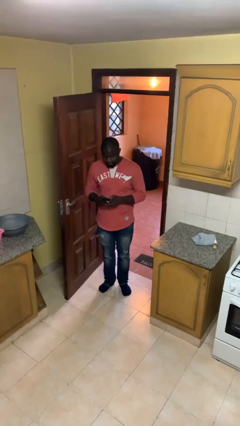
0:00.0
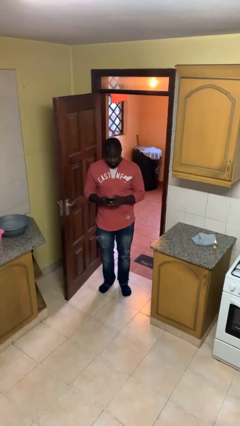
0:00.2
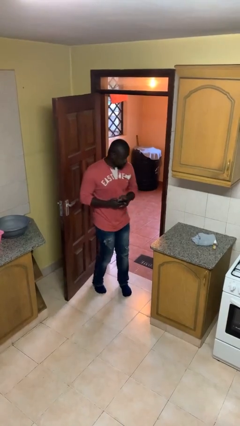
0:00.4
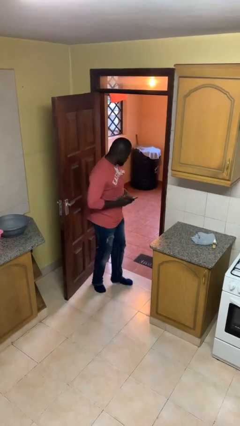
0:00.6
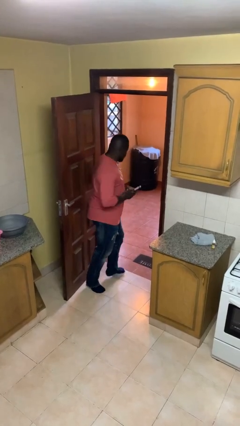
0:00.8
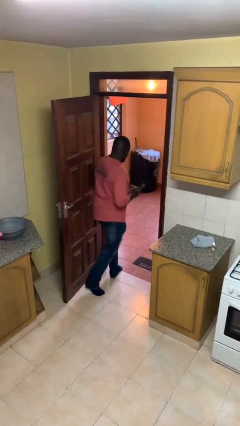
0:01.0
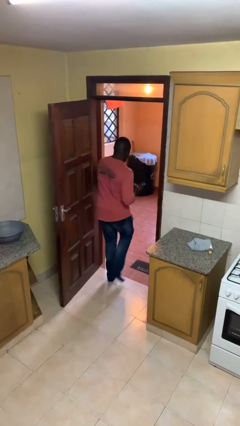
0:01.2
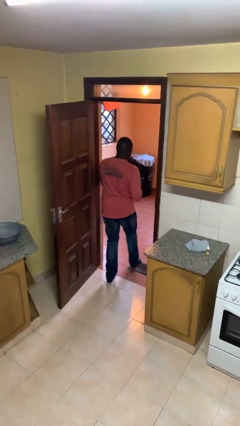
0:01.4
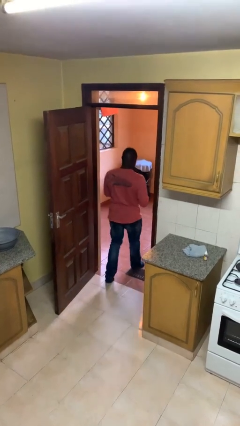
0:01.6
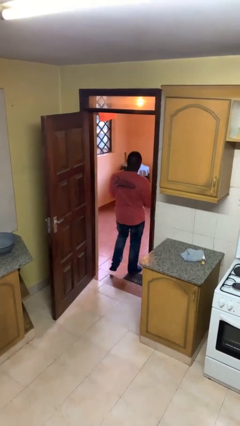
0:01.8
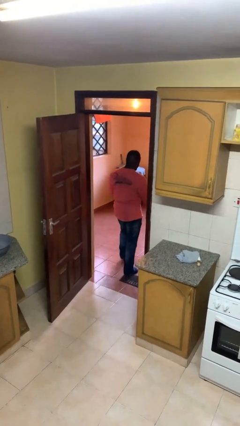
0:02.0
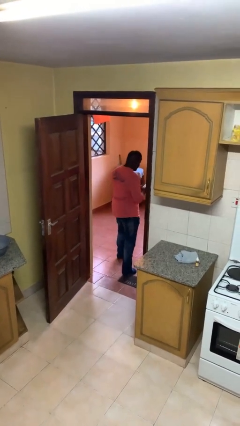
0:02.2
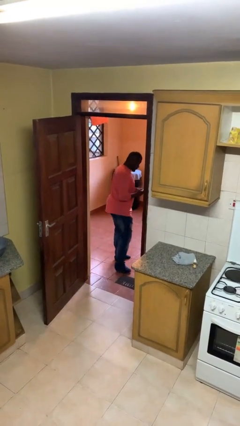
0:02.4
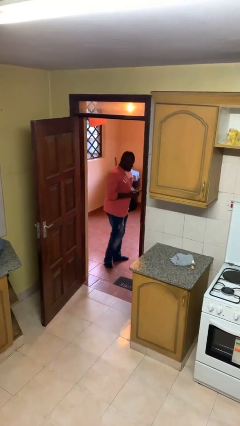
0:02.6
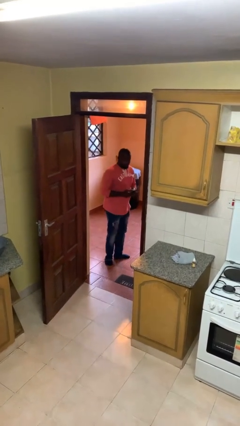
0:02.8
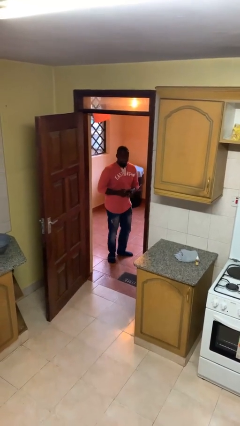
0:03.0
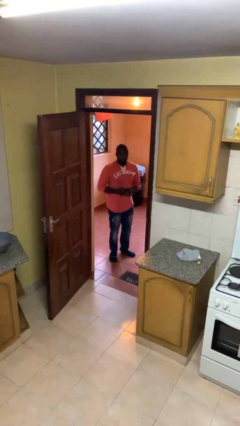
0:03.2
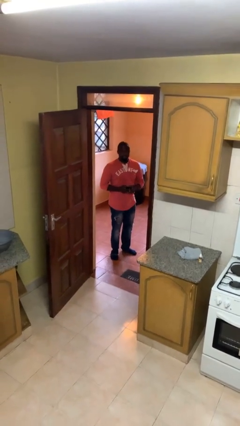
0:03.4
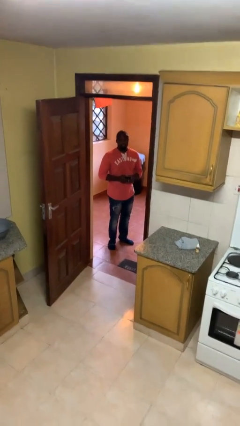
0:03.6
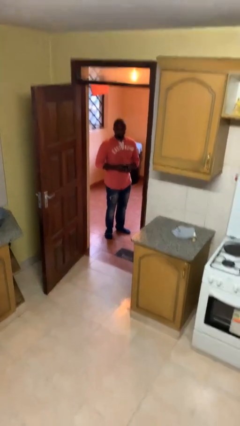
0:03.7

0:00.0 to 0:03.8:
person exits scene through structure

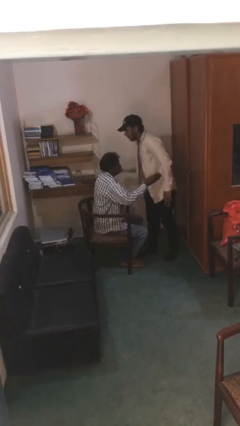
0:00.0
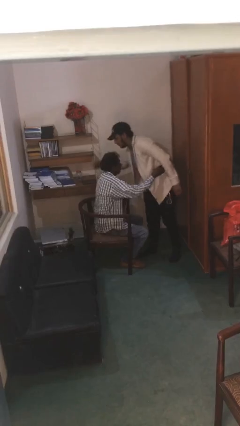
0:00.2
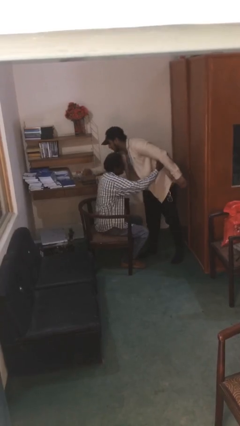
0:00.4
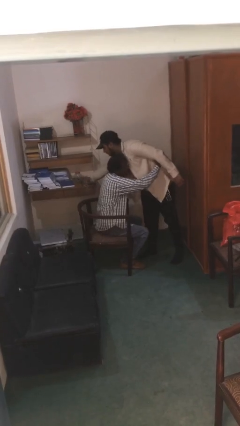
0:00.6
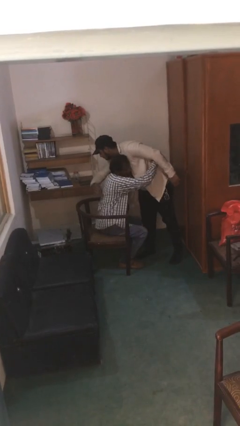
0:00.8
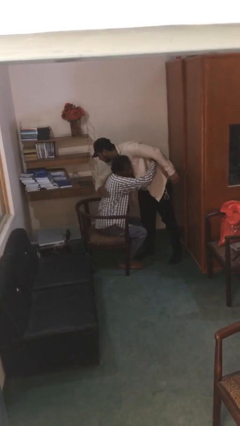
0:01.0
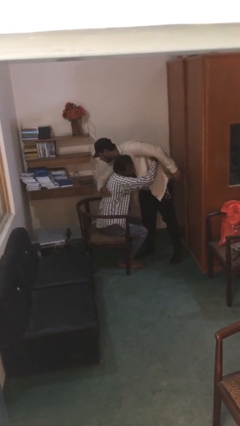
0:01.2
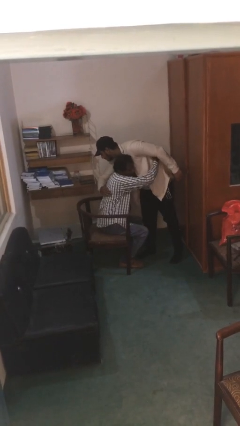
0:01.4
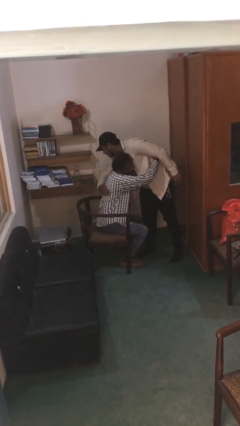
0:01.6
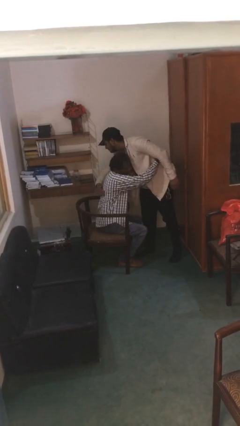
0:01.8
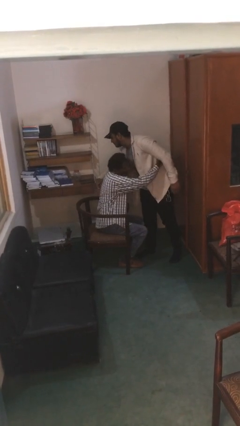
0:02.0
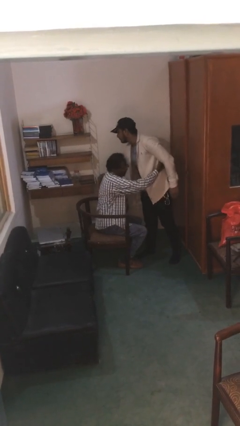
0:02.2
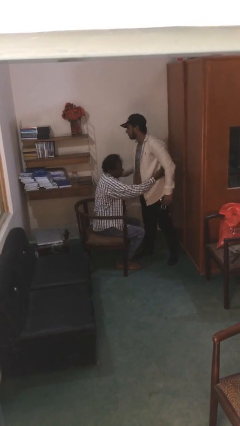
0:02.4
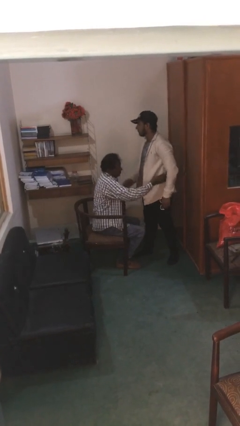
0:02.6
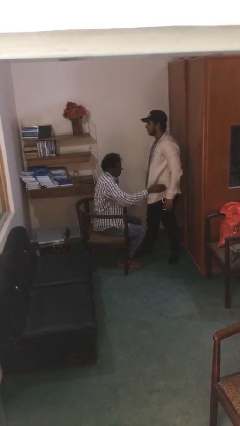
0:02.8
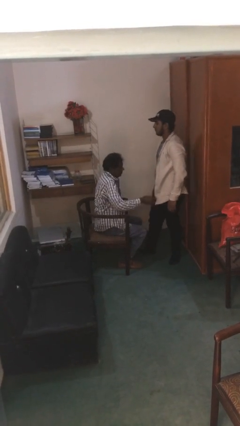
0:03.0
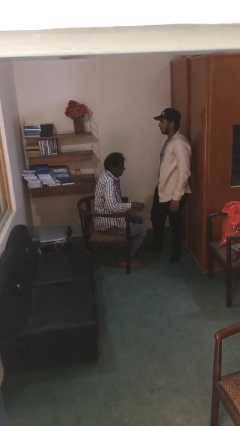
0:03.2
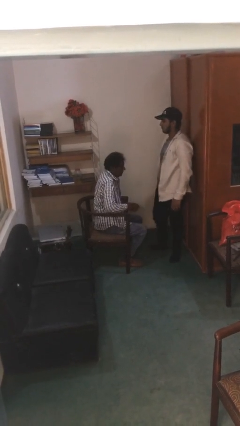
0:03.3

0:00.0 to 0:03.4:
person embraces person

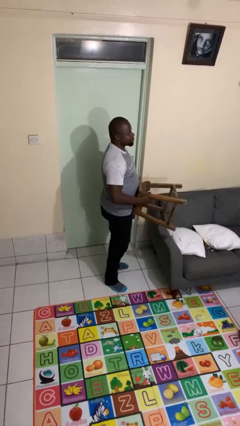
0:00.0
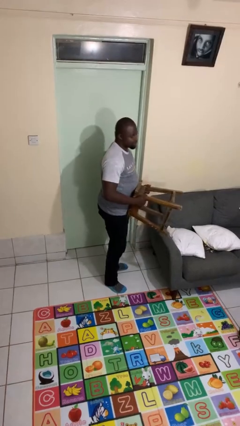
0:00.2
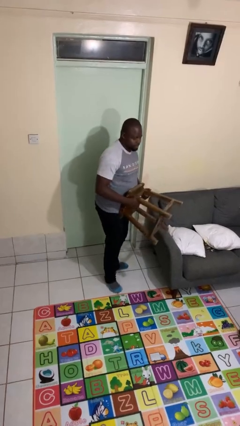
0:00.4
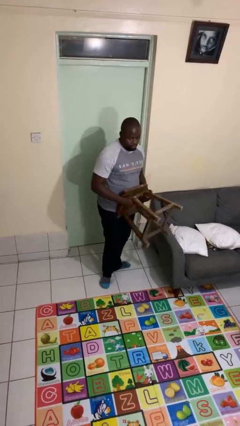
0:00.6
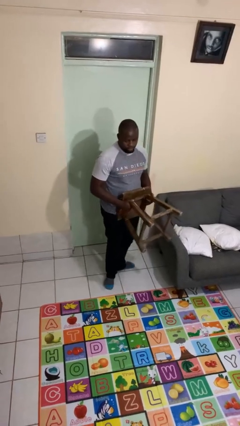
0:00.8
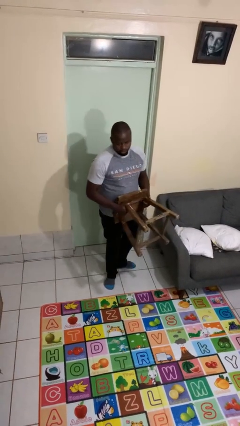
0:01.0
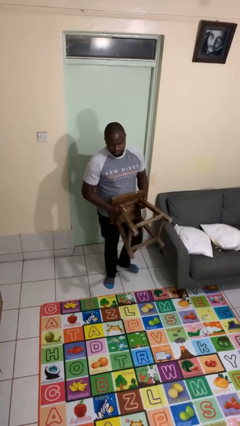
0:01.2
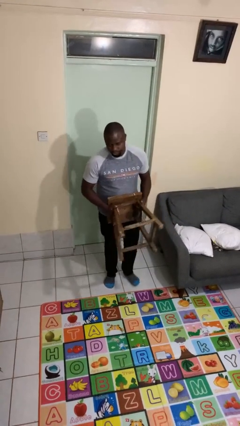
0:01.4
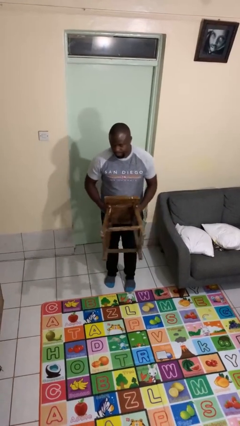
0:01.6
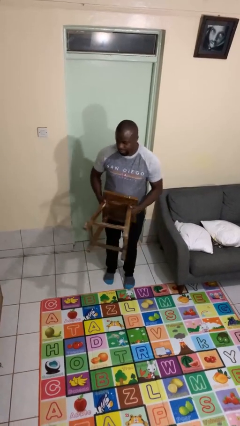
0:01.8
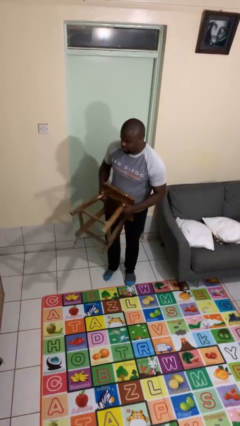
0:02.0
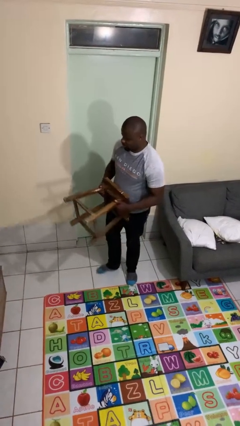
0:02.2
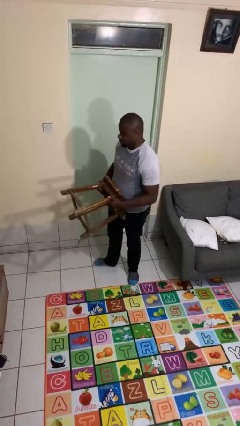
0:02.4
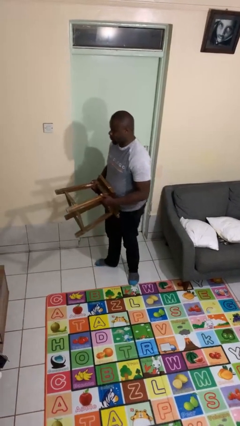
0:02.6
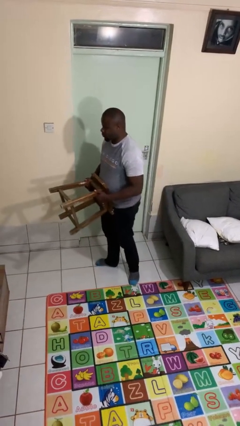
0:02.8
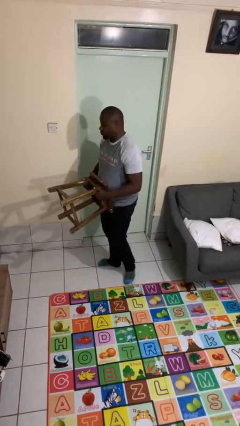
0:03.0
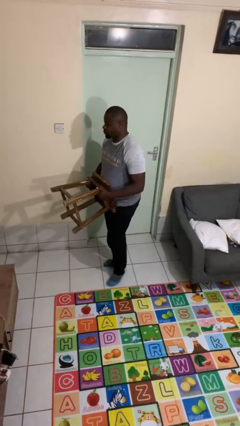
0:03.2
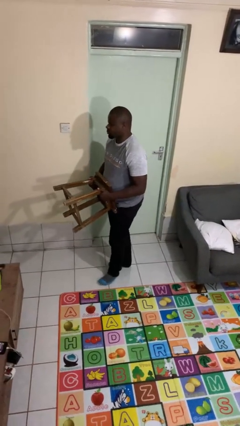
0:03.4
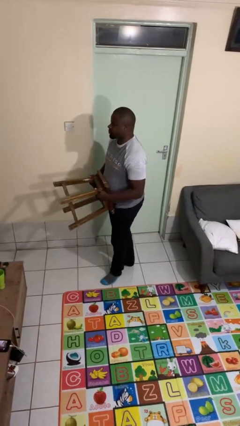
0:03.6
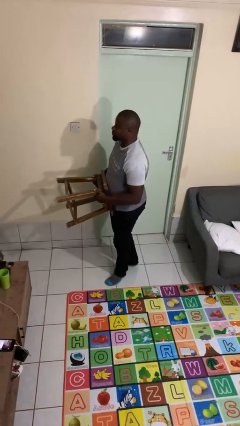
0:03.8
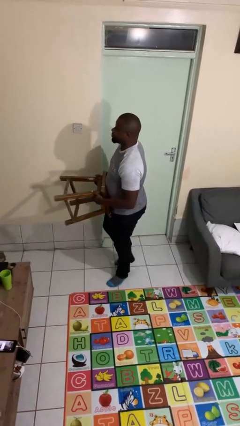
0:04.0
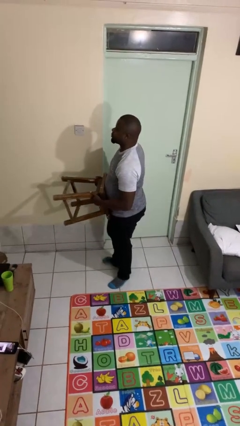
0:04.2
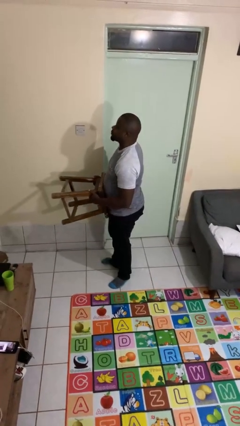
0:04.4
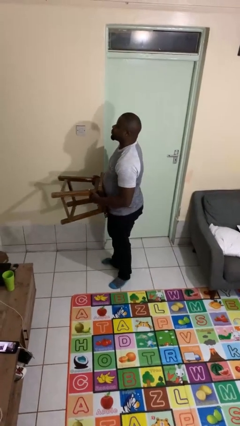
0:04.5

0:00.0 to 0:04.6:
person carries furniture

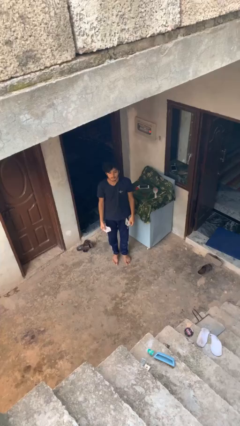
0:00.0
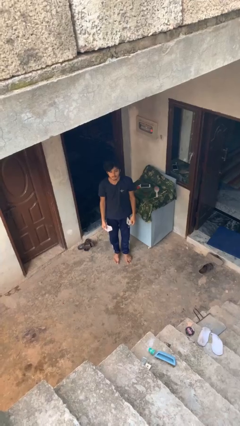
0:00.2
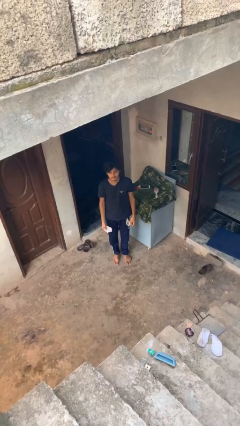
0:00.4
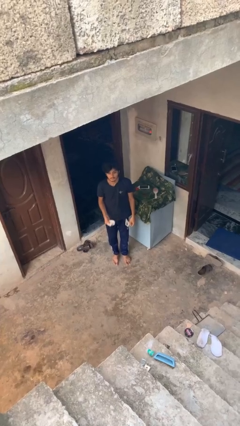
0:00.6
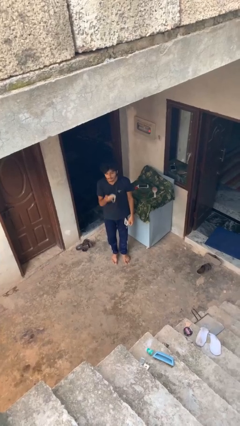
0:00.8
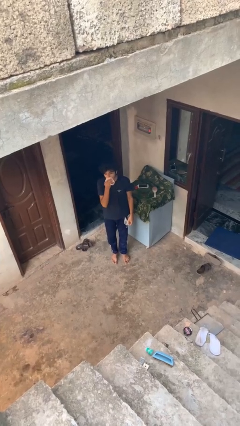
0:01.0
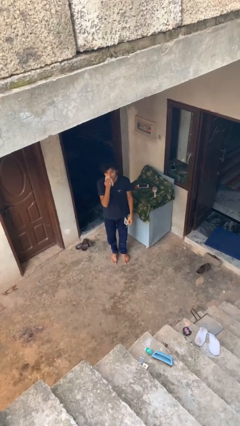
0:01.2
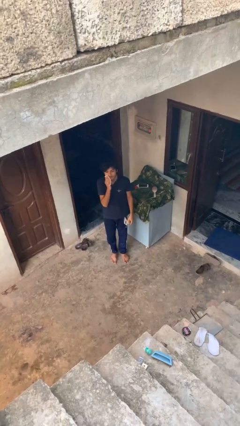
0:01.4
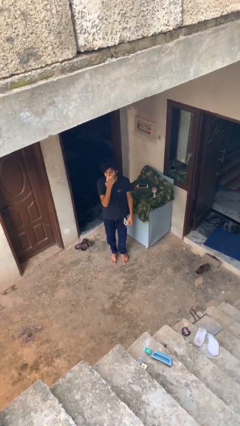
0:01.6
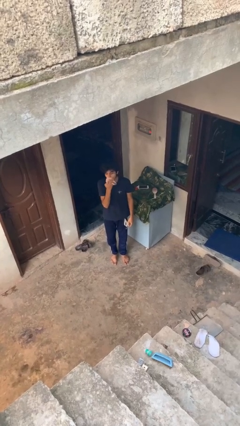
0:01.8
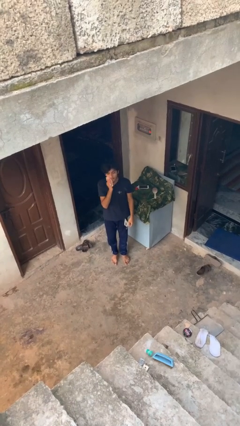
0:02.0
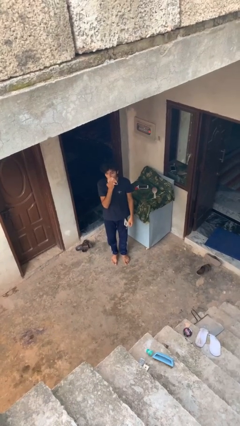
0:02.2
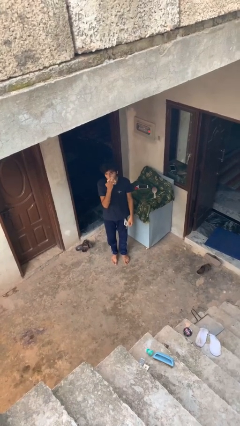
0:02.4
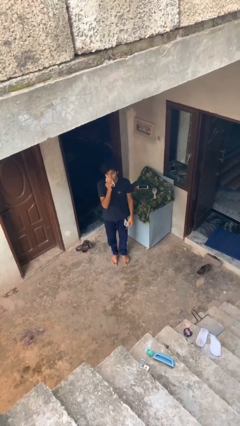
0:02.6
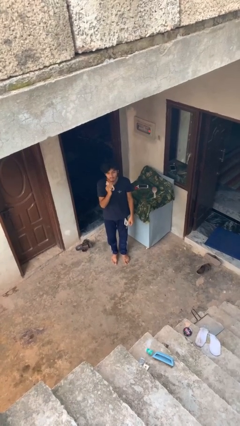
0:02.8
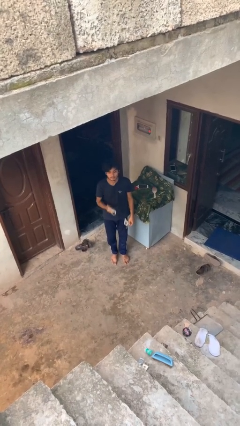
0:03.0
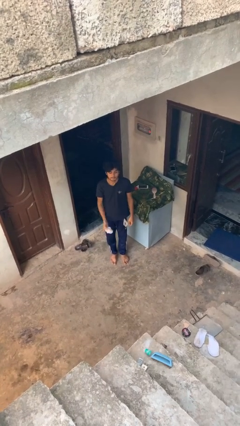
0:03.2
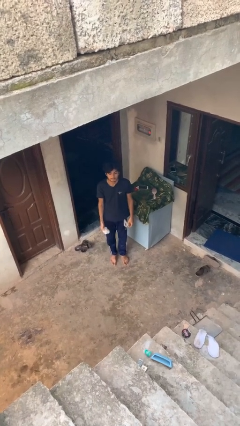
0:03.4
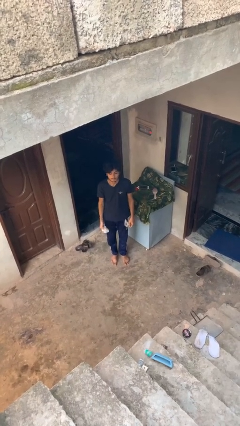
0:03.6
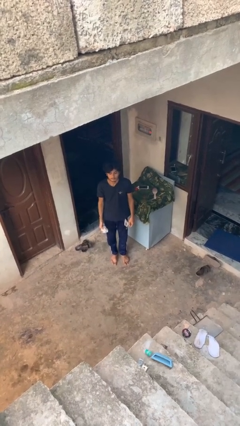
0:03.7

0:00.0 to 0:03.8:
person wipes mouth with napkin

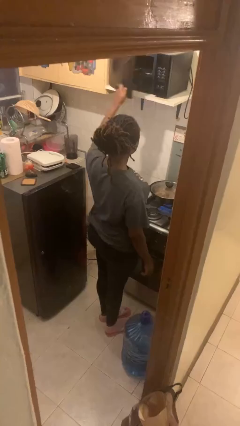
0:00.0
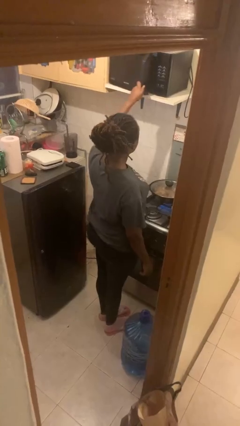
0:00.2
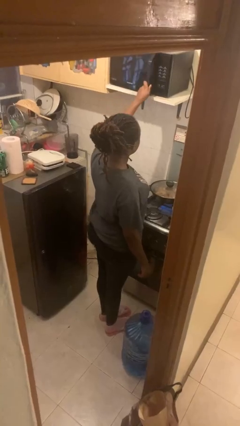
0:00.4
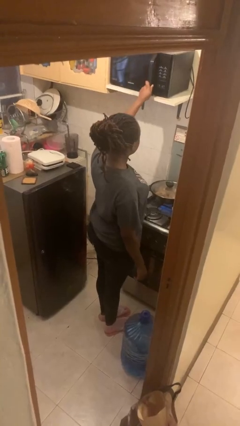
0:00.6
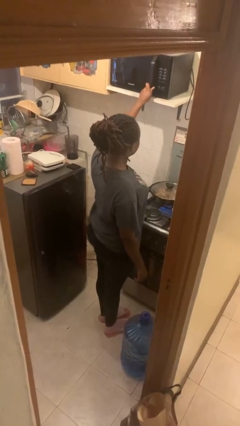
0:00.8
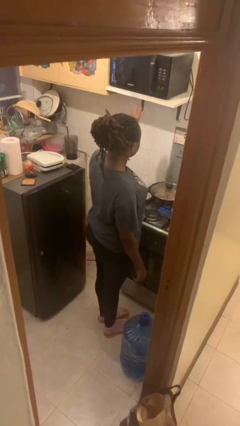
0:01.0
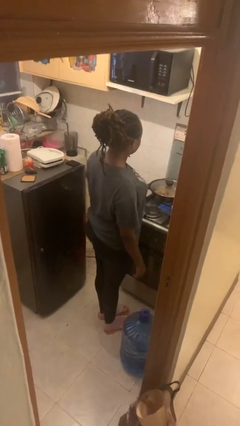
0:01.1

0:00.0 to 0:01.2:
person closes microwave

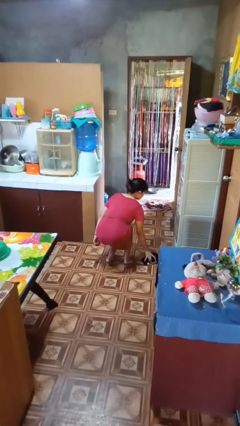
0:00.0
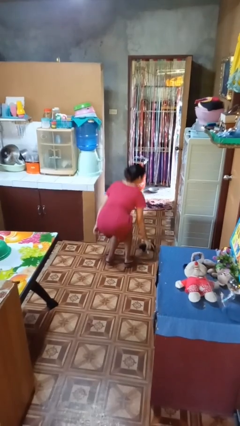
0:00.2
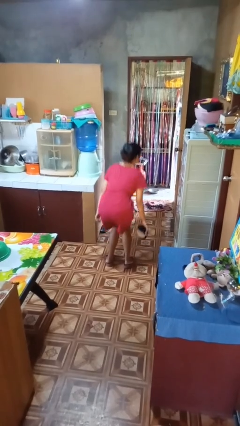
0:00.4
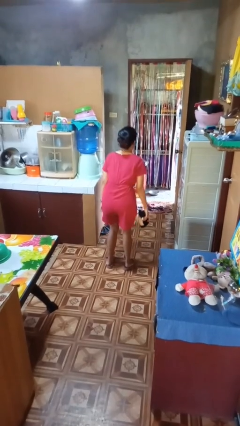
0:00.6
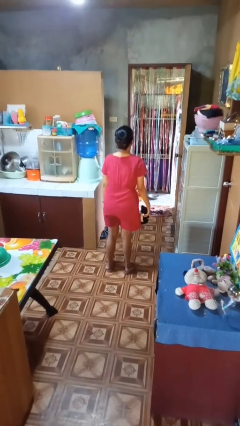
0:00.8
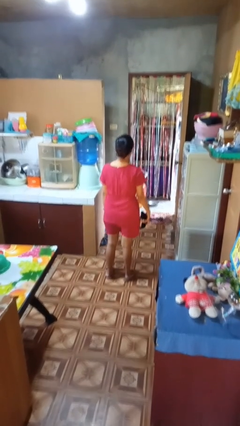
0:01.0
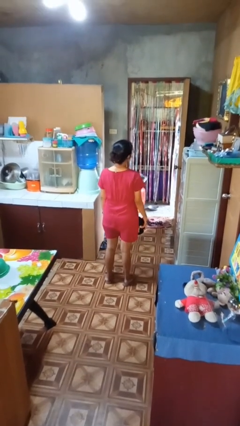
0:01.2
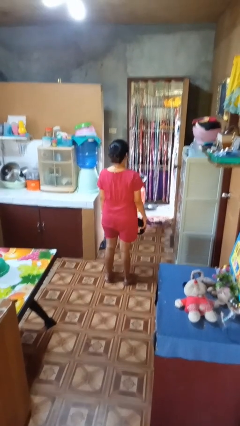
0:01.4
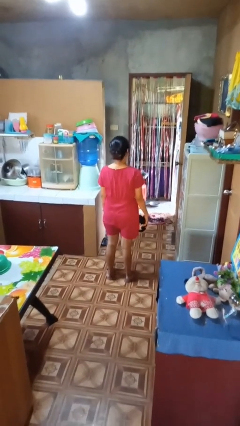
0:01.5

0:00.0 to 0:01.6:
person picks up object from floor
